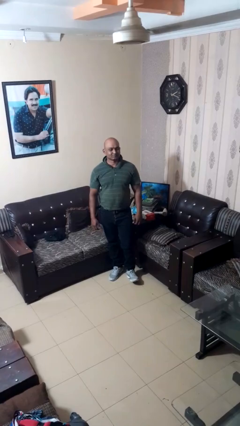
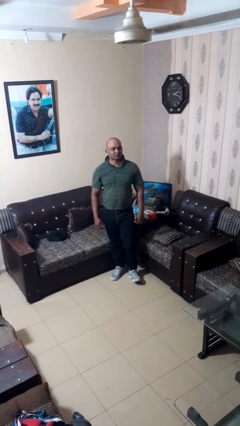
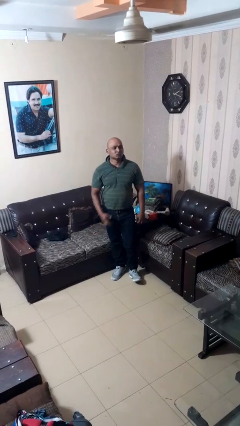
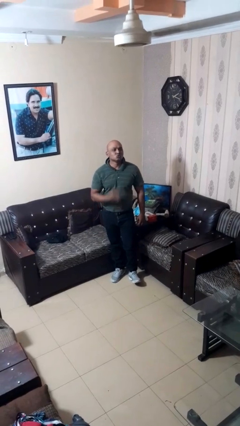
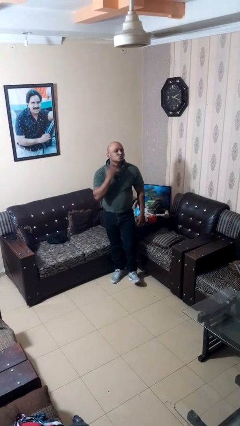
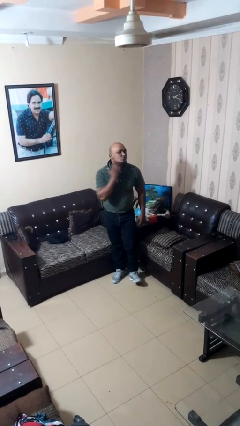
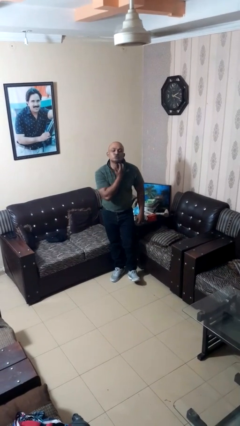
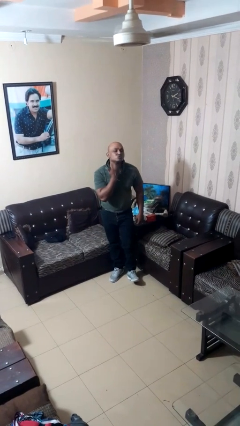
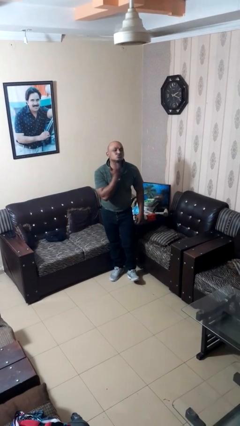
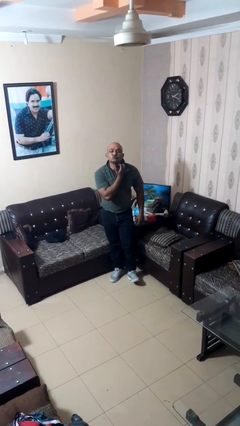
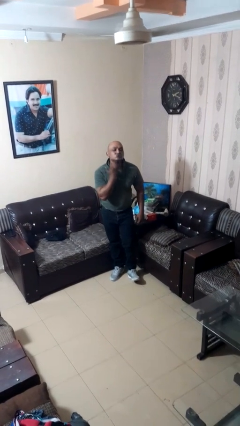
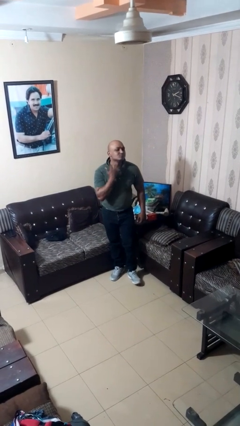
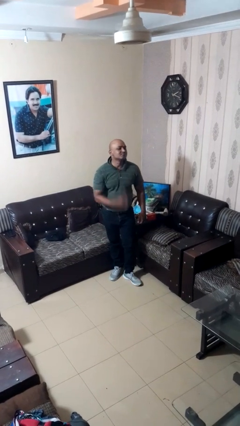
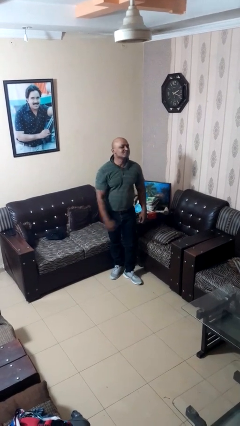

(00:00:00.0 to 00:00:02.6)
person gestures cut

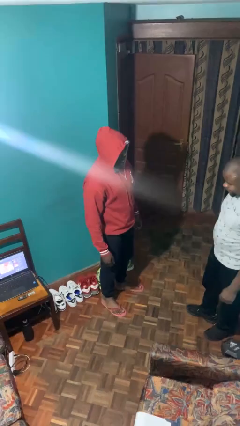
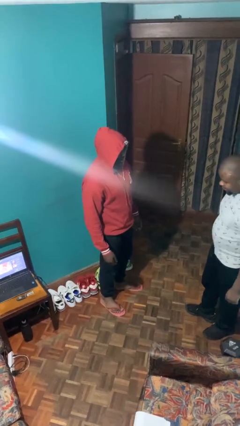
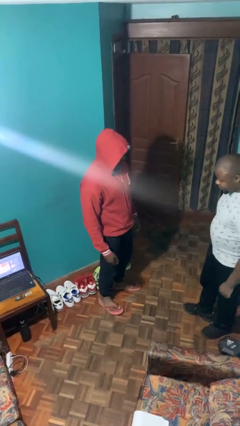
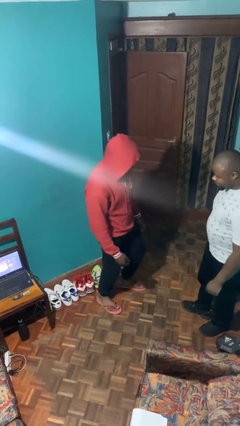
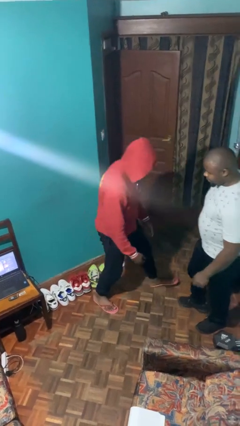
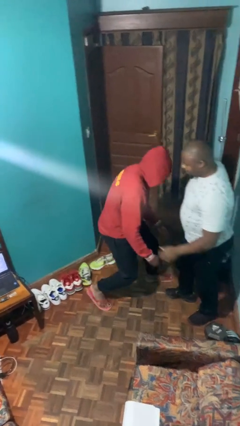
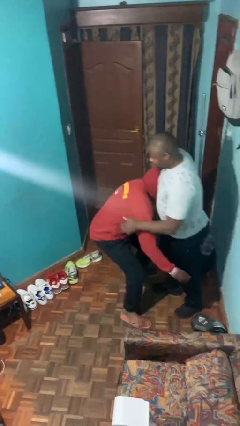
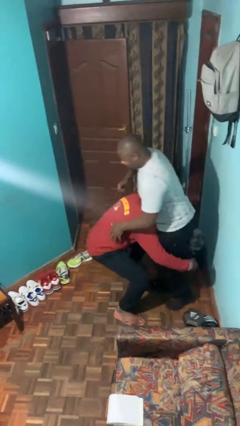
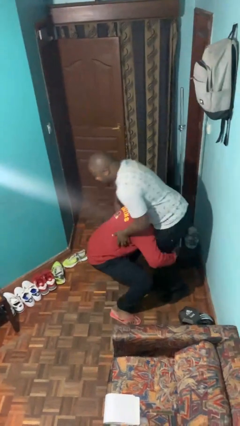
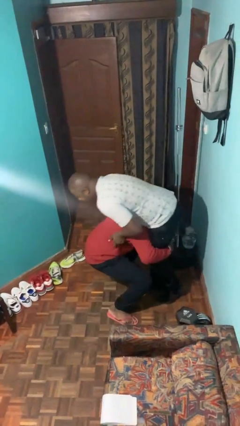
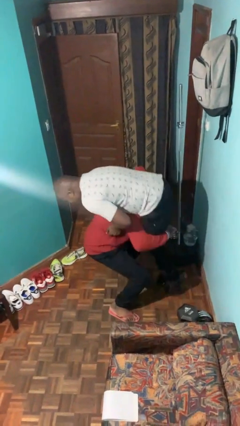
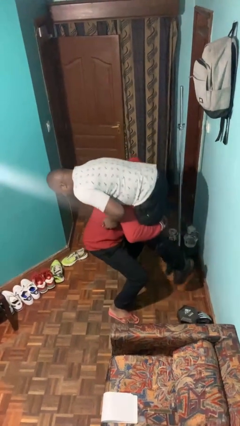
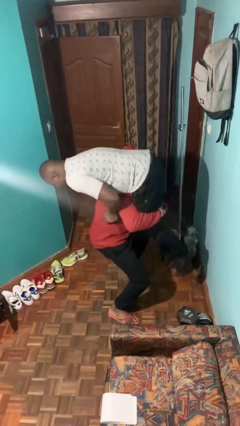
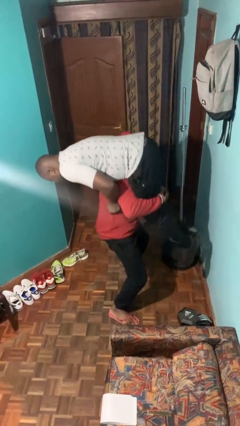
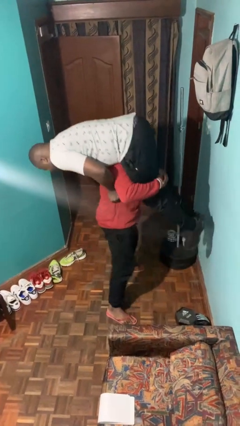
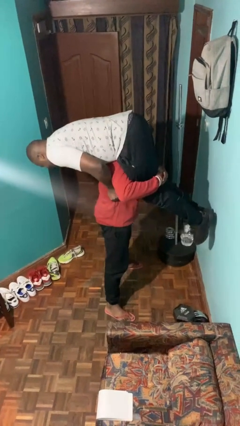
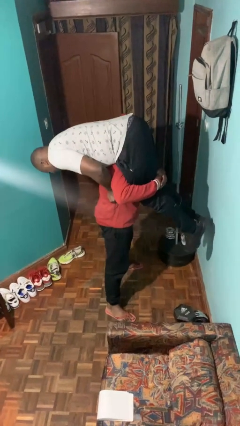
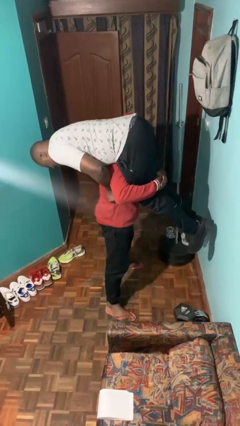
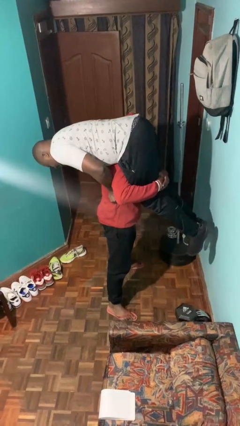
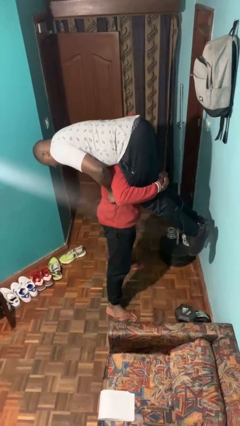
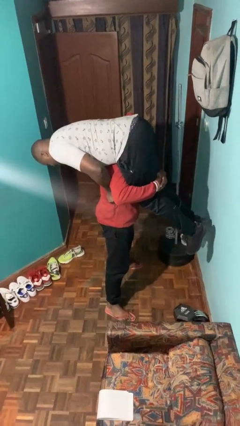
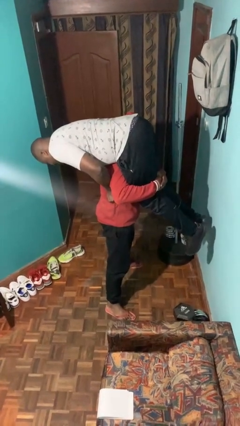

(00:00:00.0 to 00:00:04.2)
person carries person over shoulder

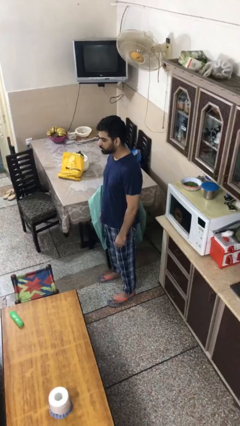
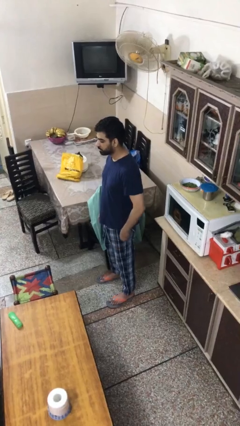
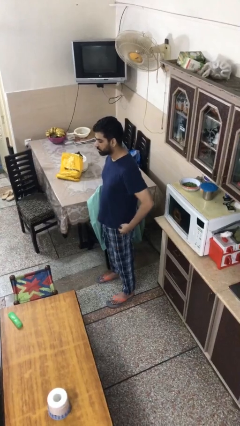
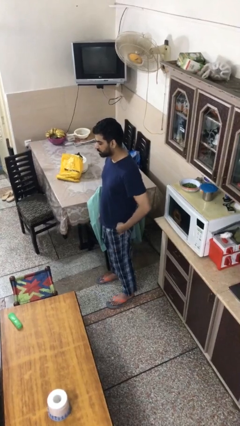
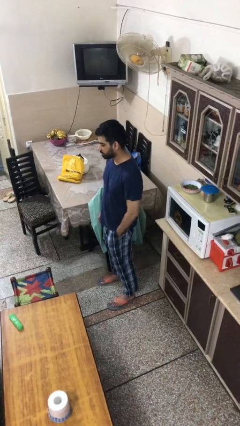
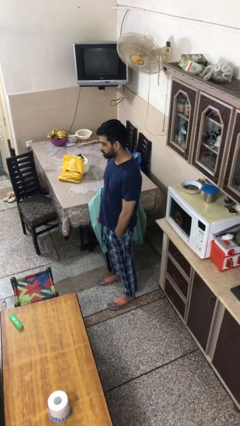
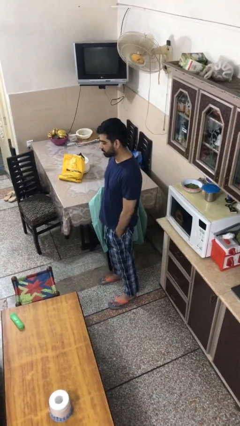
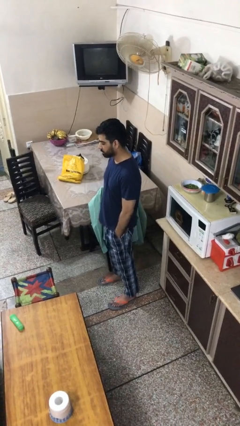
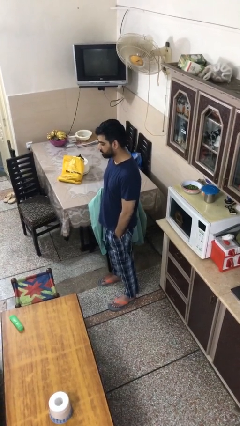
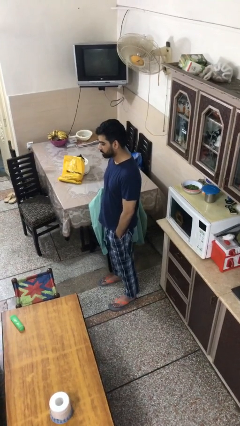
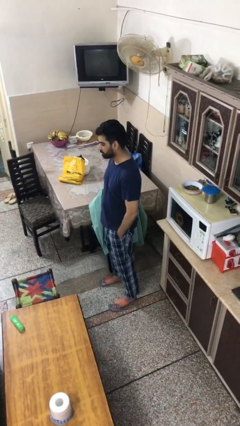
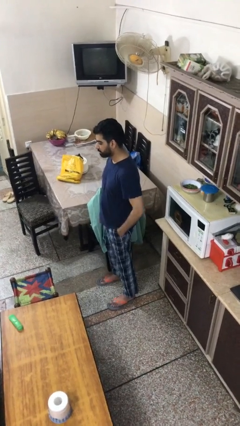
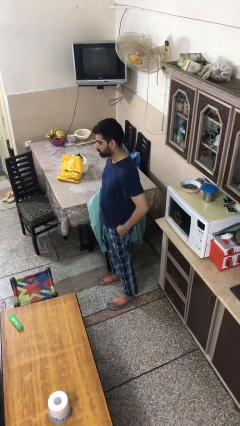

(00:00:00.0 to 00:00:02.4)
person puts hands in back pockets

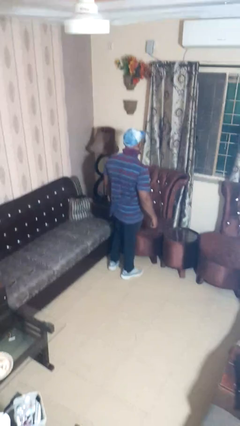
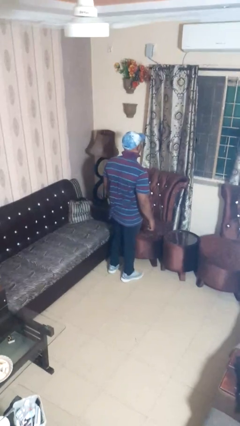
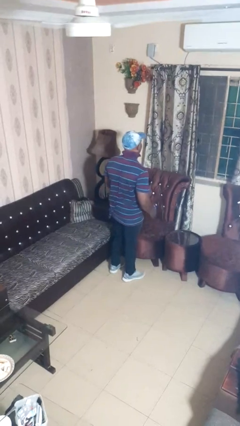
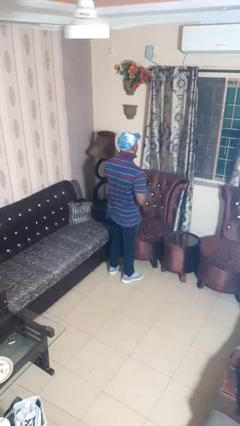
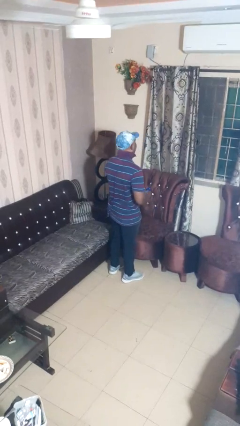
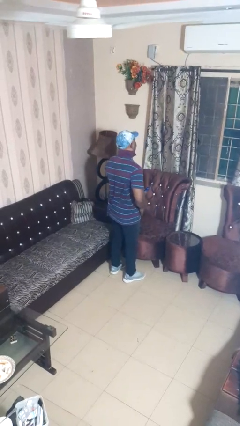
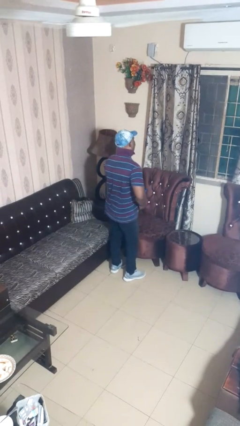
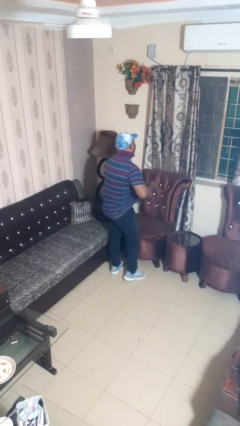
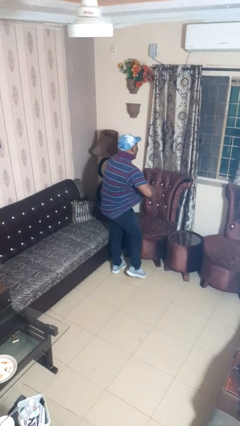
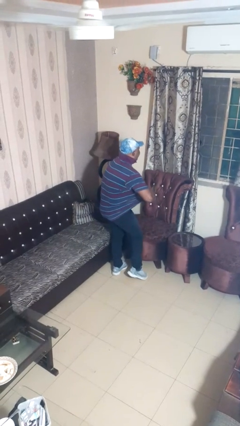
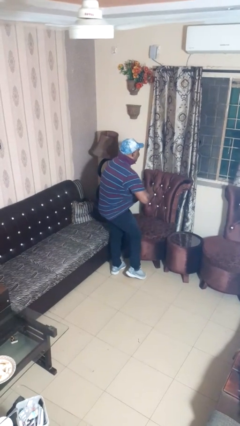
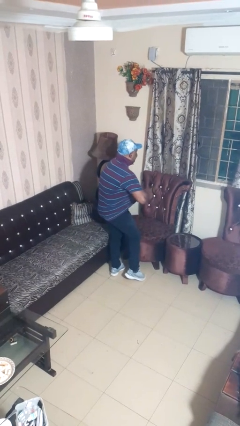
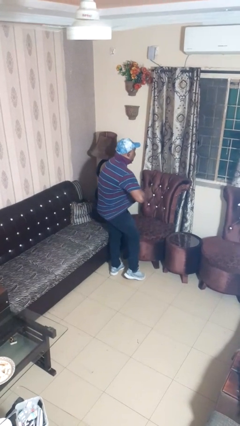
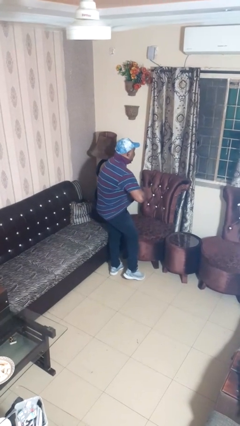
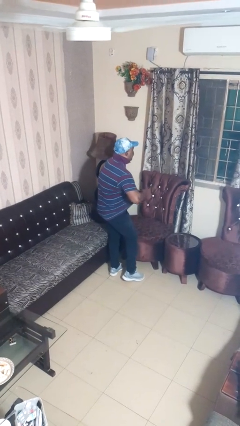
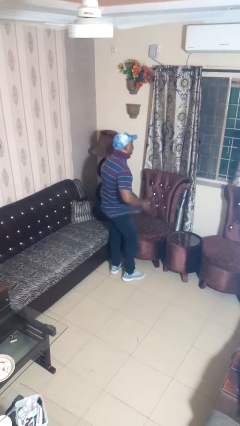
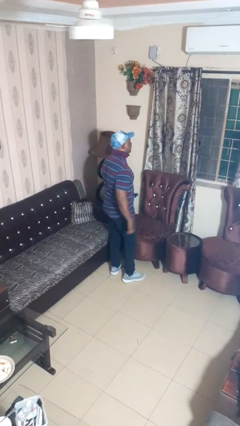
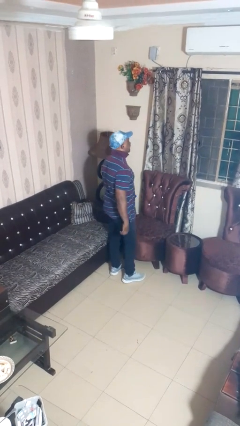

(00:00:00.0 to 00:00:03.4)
person applies deodorant

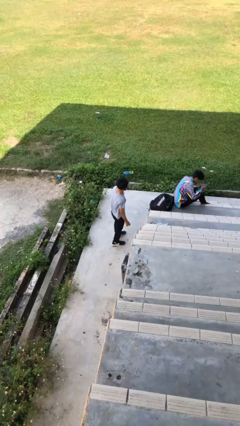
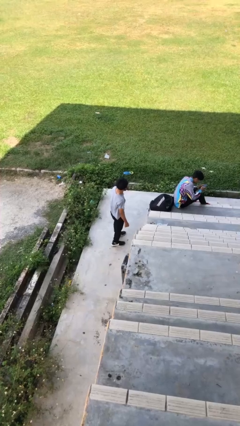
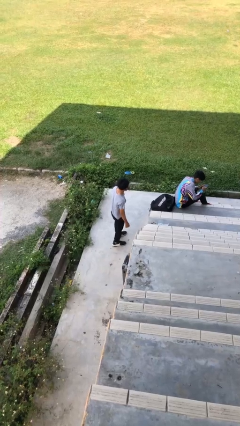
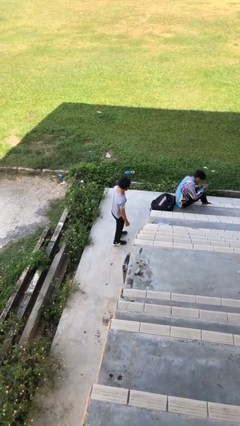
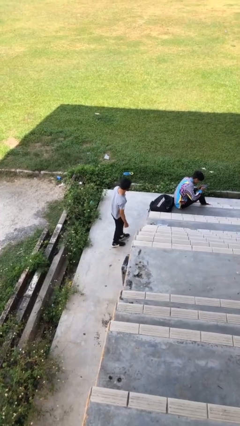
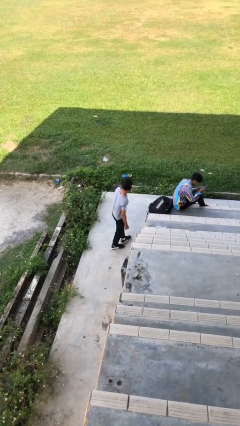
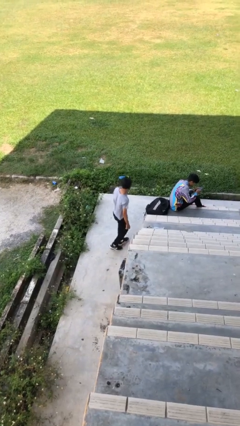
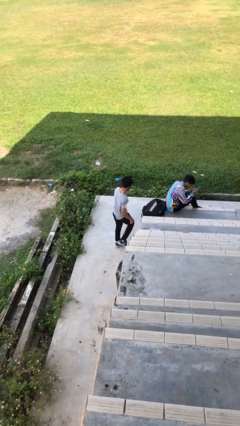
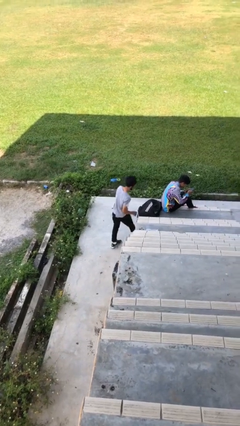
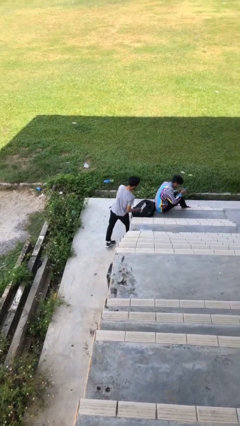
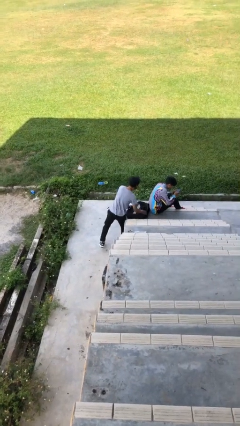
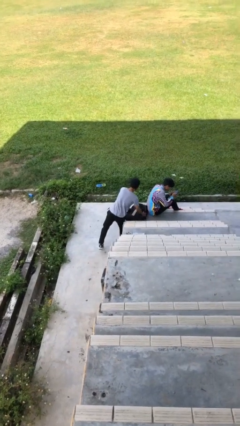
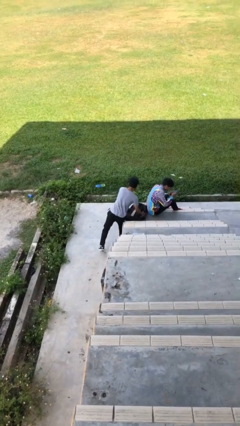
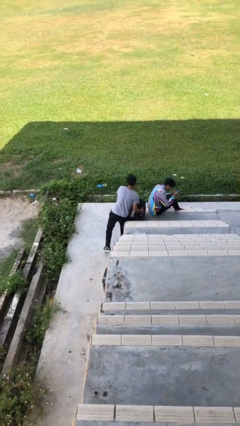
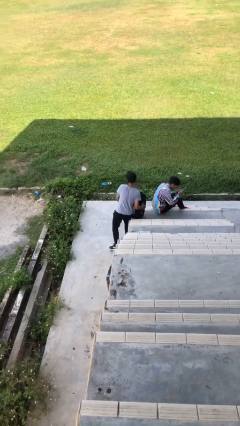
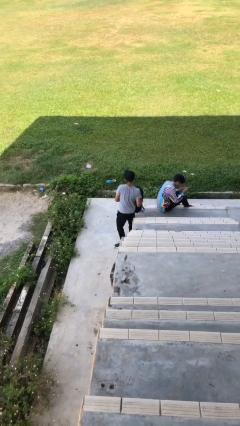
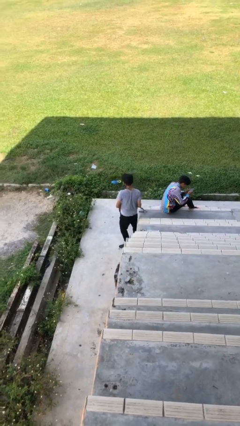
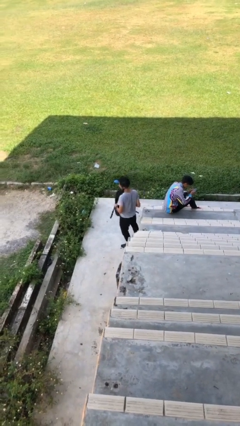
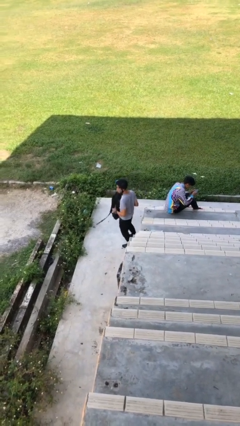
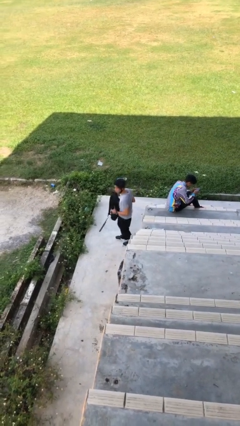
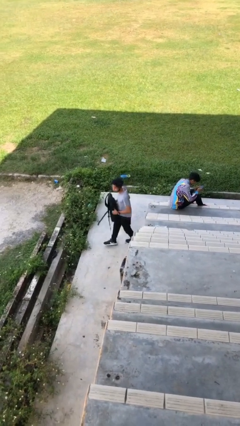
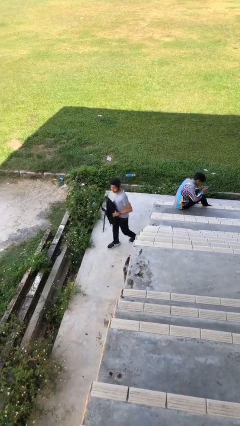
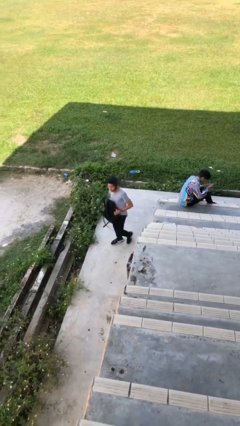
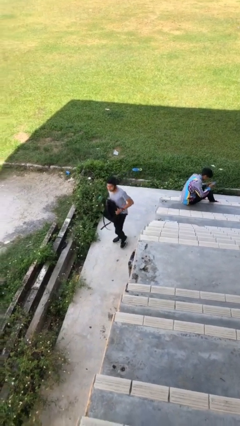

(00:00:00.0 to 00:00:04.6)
person steals object from person

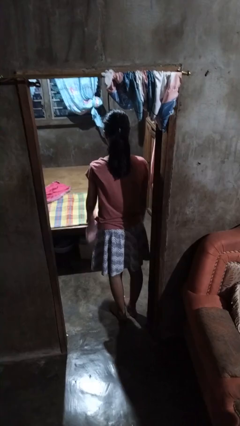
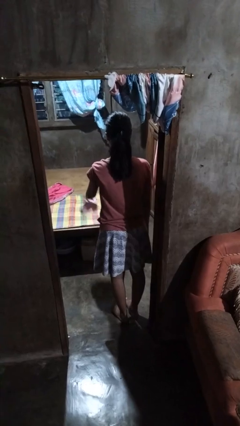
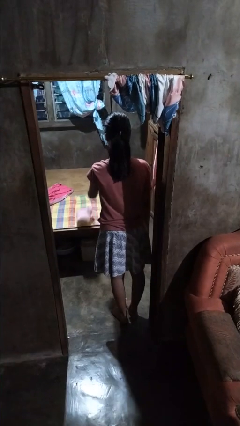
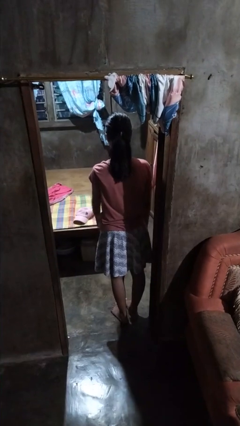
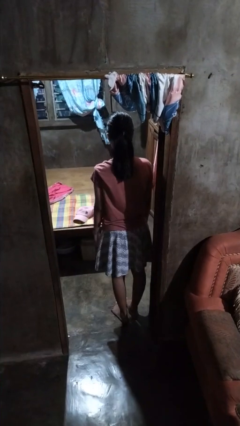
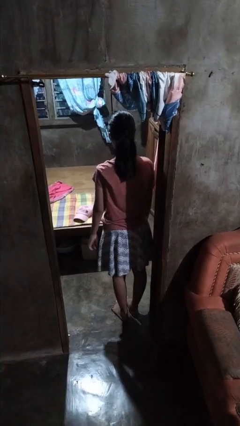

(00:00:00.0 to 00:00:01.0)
person throws object on bed
